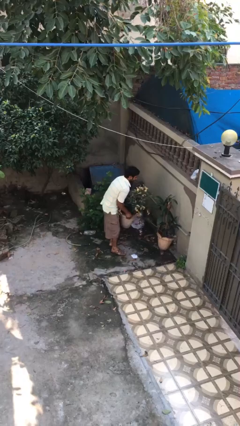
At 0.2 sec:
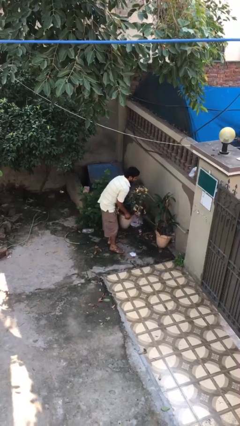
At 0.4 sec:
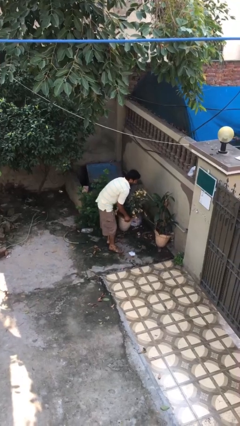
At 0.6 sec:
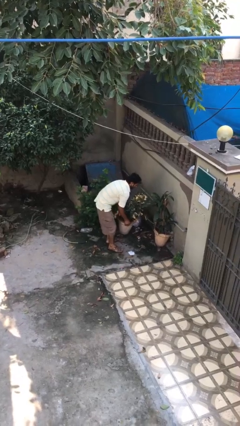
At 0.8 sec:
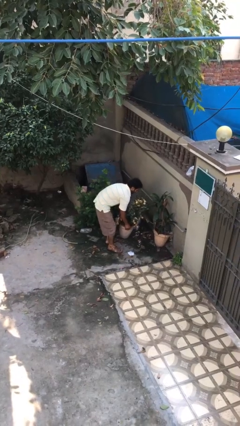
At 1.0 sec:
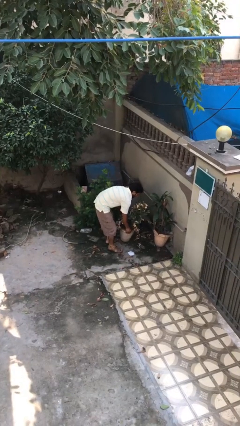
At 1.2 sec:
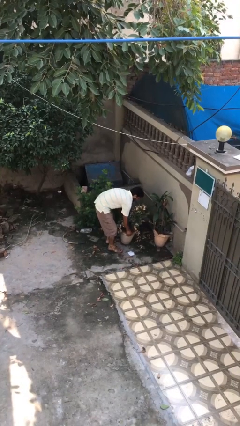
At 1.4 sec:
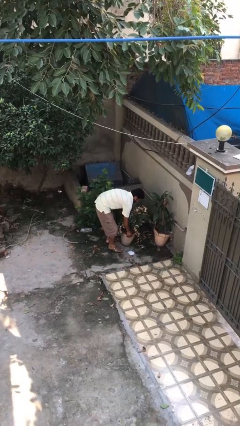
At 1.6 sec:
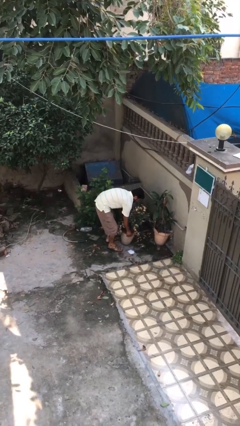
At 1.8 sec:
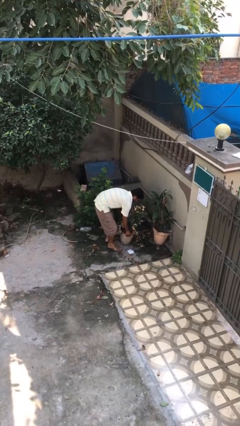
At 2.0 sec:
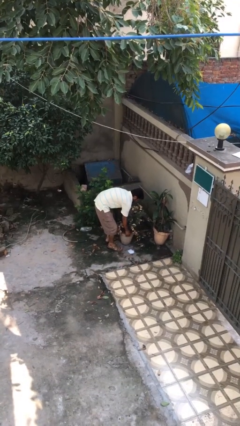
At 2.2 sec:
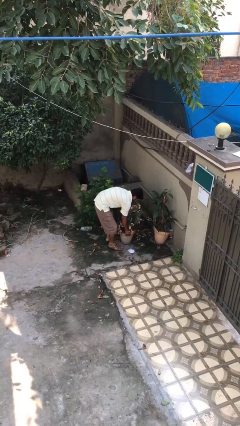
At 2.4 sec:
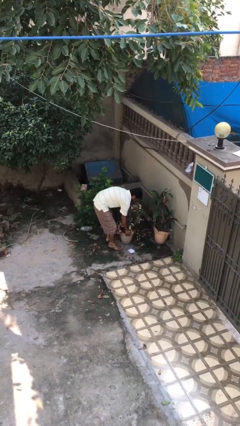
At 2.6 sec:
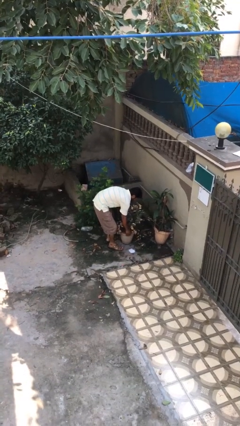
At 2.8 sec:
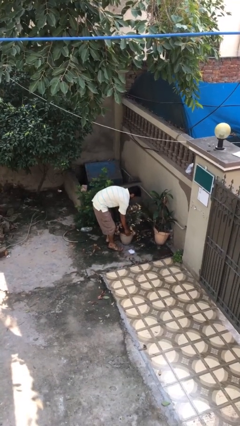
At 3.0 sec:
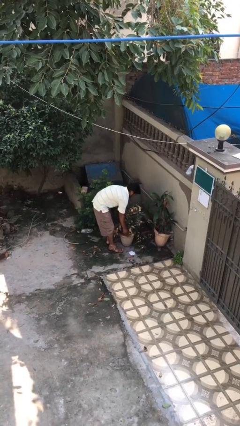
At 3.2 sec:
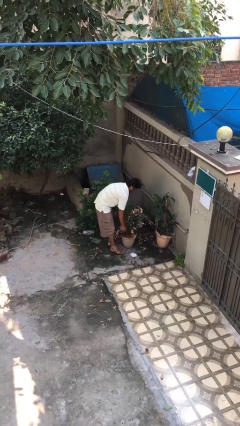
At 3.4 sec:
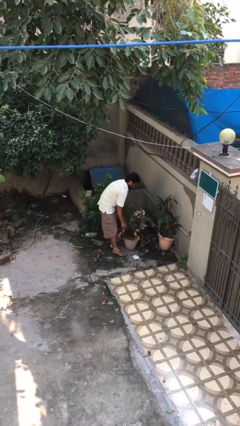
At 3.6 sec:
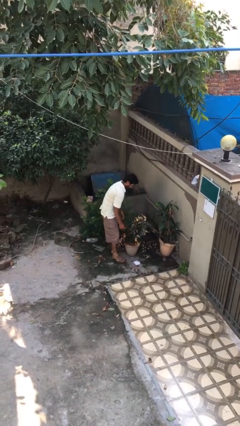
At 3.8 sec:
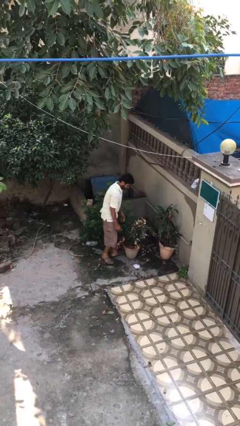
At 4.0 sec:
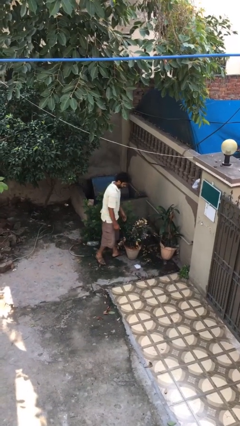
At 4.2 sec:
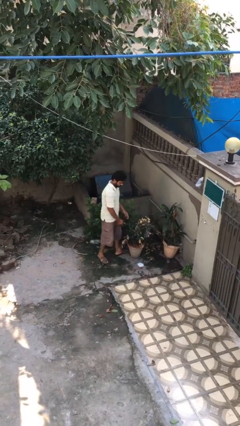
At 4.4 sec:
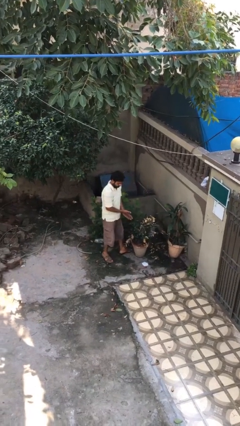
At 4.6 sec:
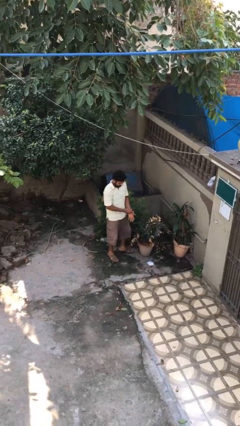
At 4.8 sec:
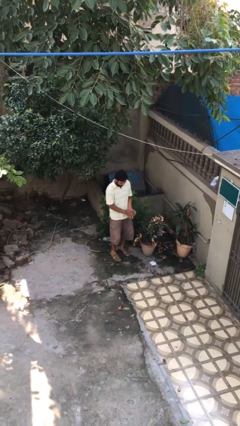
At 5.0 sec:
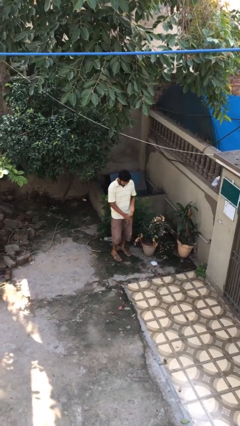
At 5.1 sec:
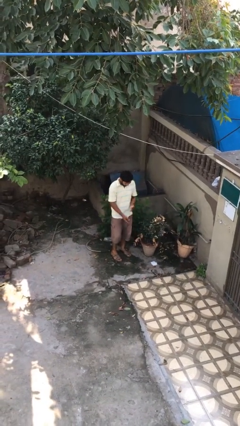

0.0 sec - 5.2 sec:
person puts down object on floor

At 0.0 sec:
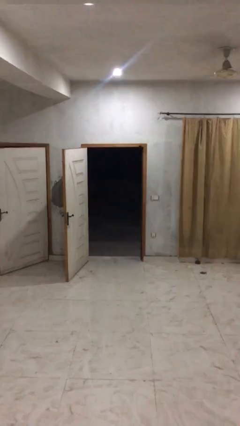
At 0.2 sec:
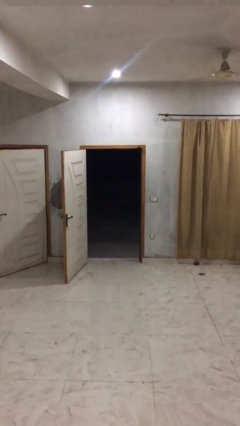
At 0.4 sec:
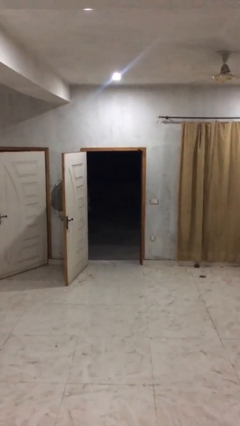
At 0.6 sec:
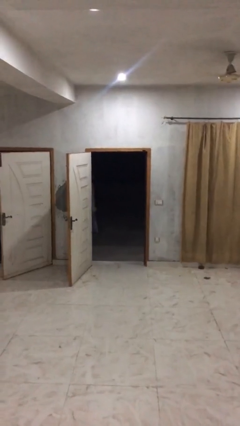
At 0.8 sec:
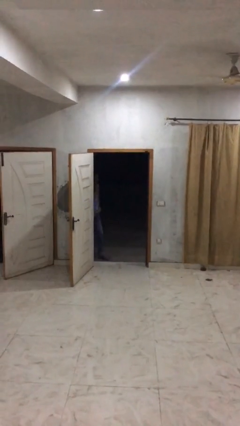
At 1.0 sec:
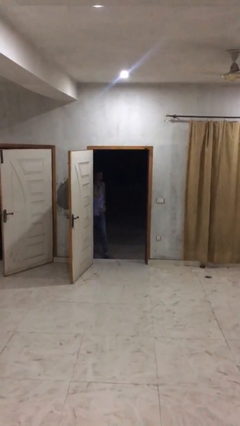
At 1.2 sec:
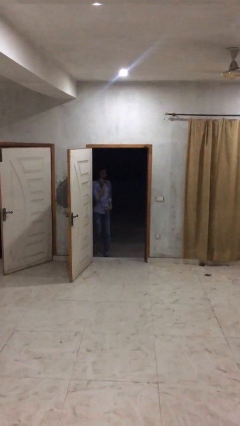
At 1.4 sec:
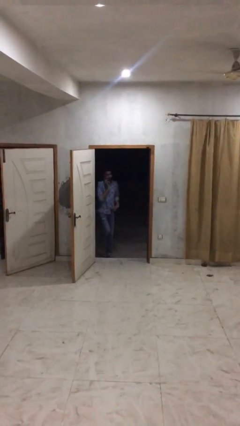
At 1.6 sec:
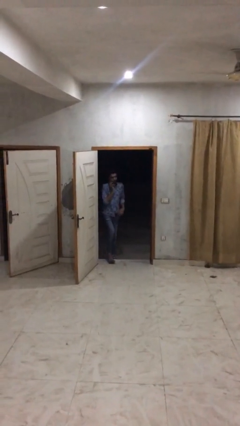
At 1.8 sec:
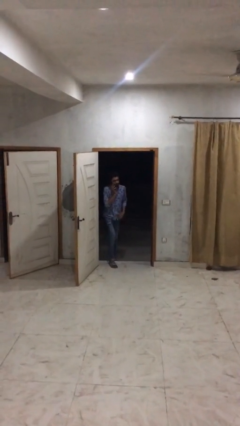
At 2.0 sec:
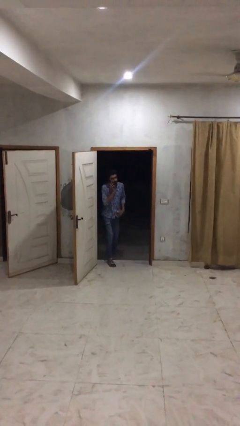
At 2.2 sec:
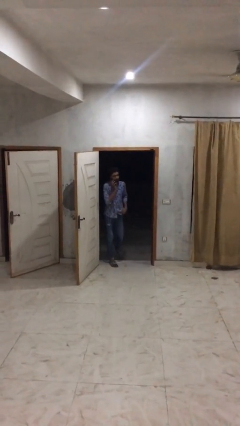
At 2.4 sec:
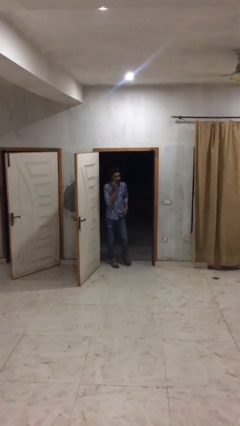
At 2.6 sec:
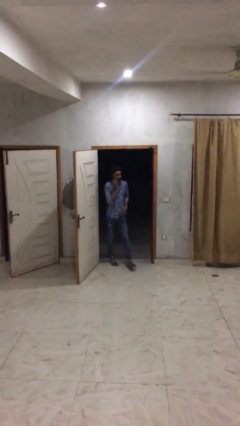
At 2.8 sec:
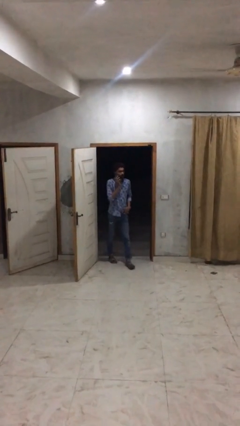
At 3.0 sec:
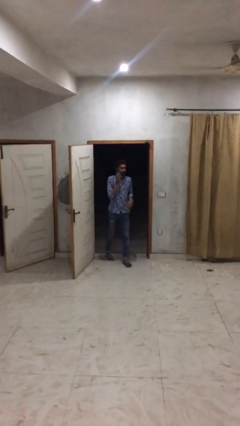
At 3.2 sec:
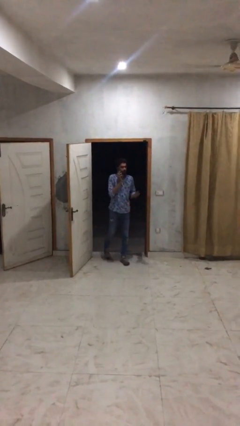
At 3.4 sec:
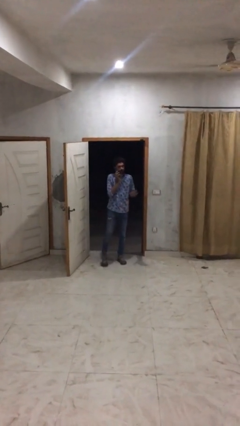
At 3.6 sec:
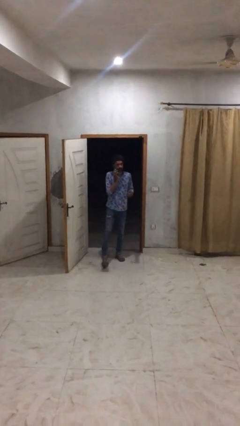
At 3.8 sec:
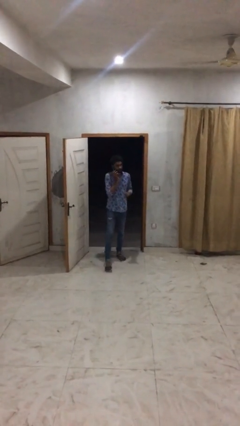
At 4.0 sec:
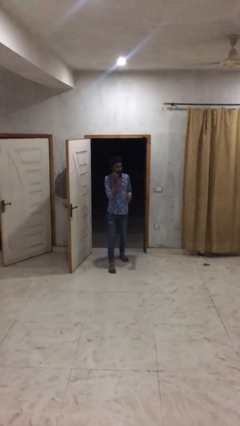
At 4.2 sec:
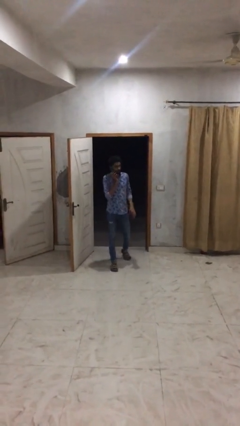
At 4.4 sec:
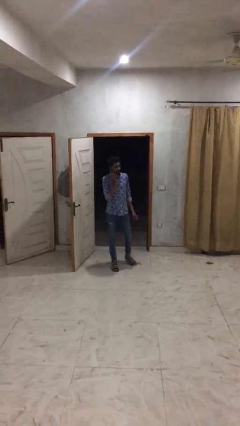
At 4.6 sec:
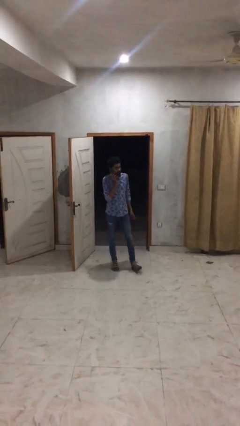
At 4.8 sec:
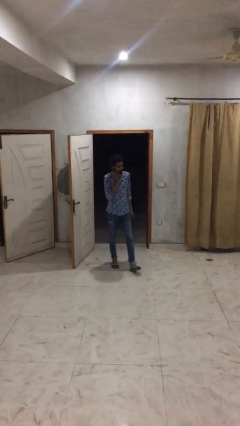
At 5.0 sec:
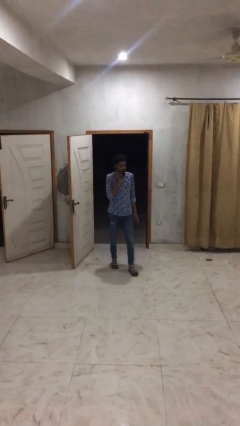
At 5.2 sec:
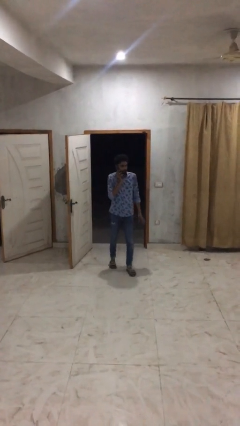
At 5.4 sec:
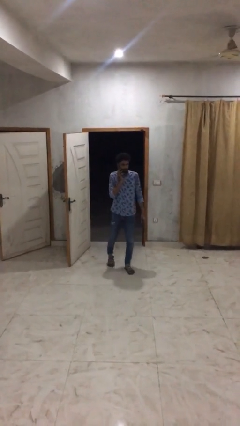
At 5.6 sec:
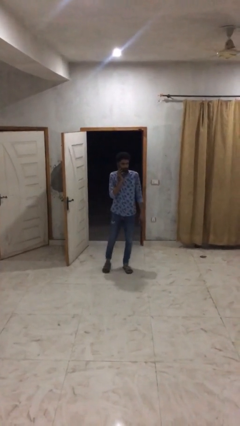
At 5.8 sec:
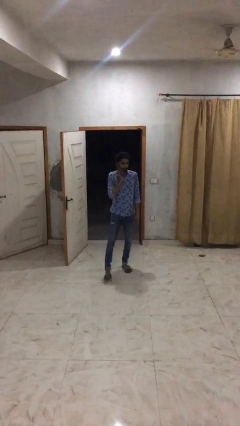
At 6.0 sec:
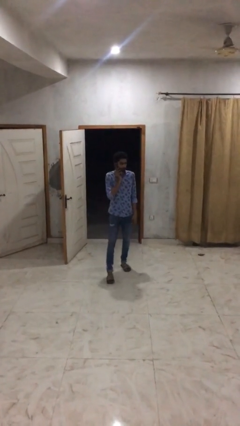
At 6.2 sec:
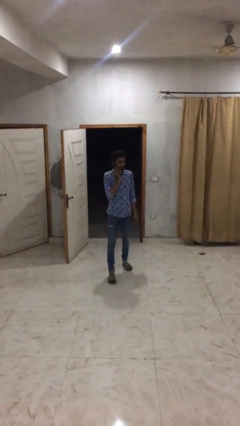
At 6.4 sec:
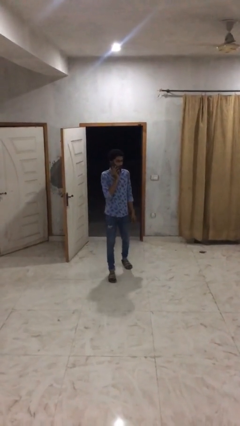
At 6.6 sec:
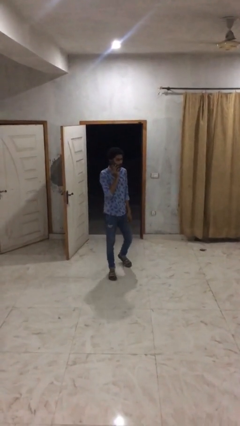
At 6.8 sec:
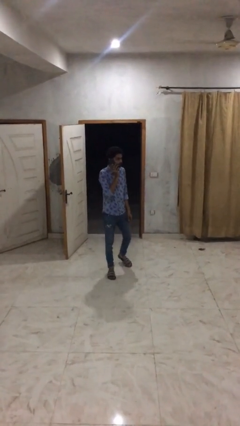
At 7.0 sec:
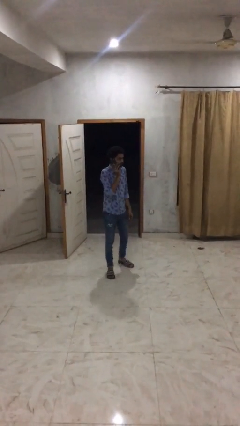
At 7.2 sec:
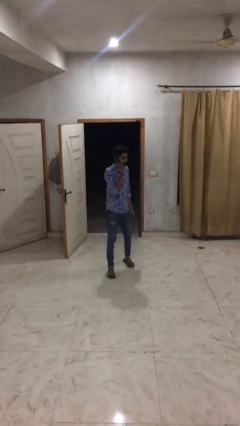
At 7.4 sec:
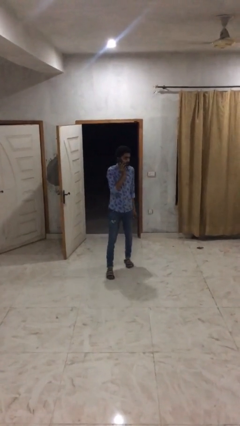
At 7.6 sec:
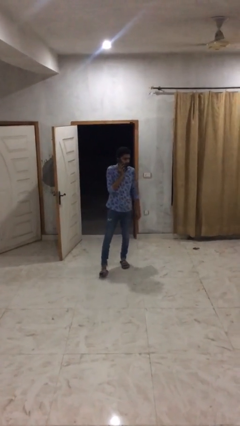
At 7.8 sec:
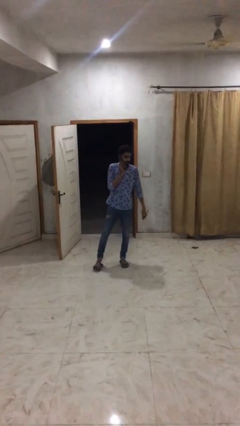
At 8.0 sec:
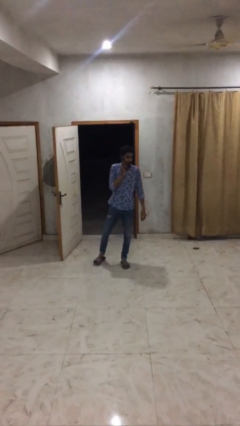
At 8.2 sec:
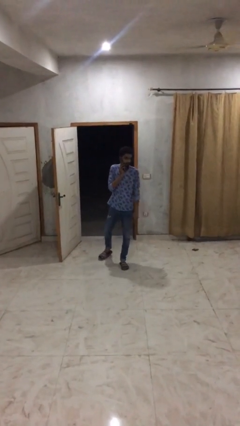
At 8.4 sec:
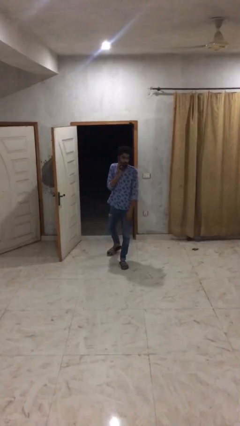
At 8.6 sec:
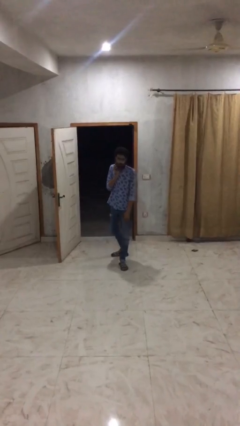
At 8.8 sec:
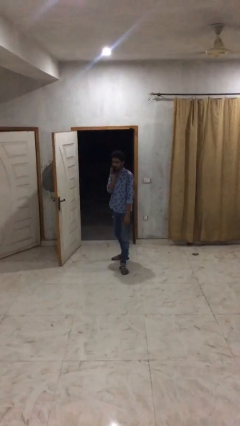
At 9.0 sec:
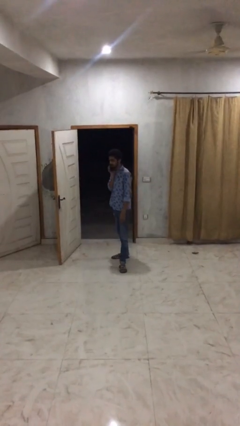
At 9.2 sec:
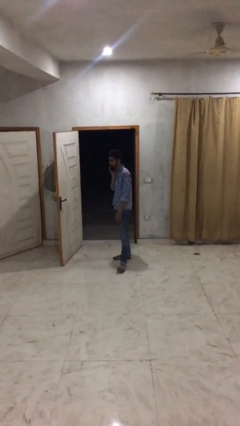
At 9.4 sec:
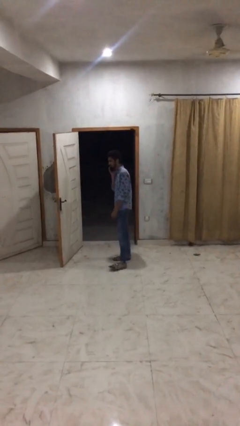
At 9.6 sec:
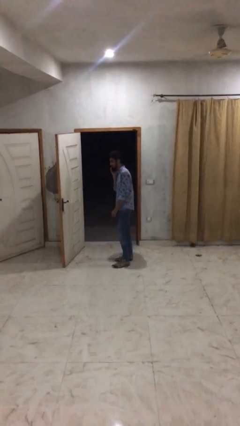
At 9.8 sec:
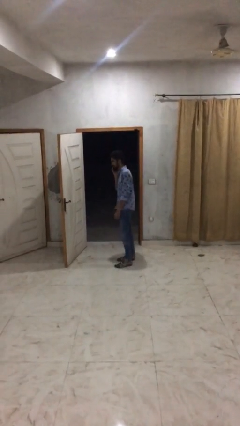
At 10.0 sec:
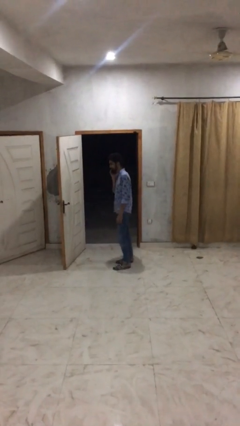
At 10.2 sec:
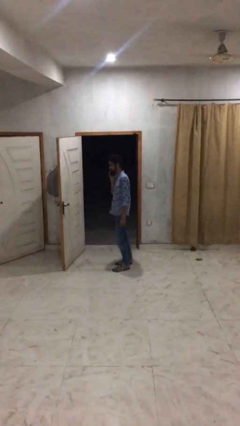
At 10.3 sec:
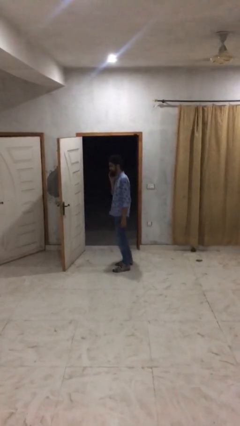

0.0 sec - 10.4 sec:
person enters scene through structure

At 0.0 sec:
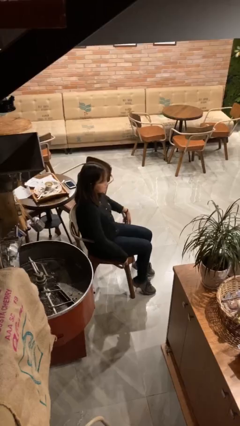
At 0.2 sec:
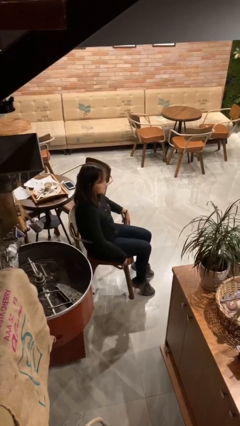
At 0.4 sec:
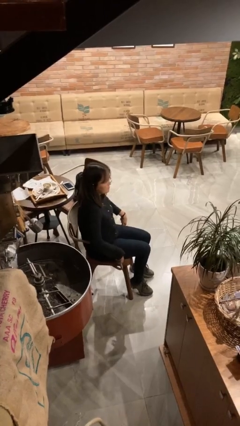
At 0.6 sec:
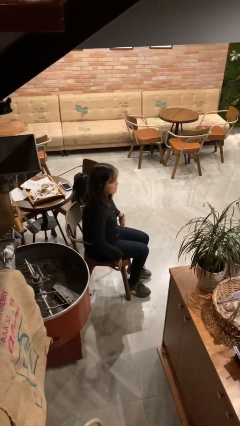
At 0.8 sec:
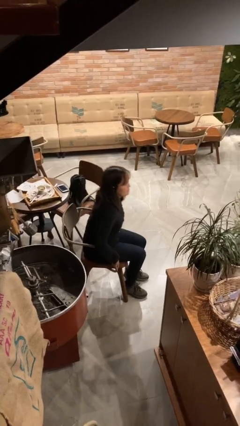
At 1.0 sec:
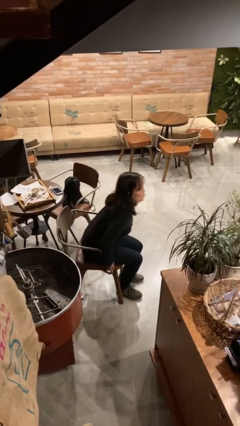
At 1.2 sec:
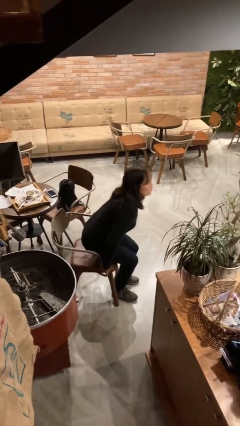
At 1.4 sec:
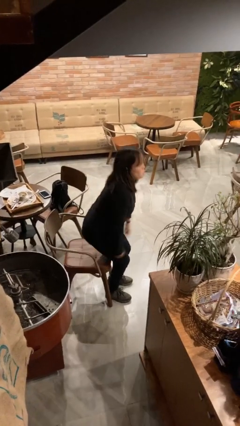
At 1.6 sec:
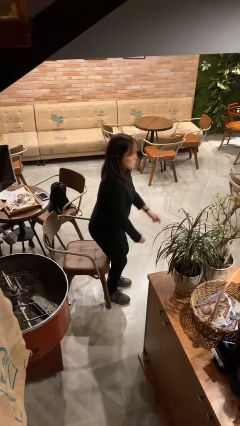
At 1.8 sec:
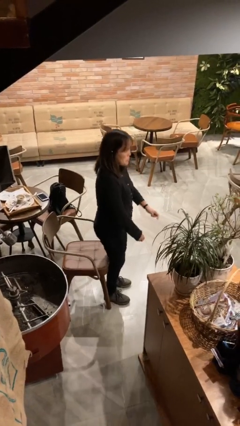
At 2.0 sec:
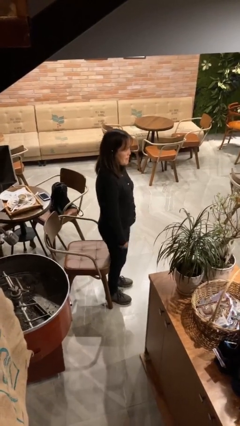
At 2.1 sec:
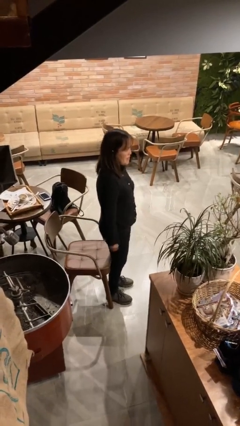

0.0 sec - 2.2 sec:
person stands up
